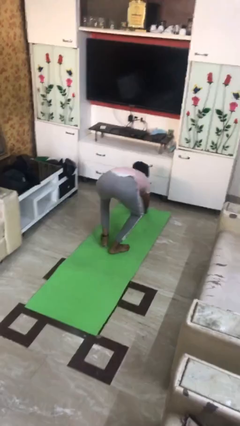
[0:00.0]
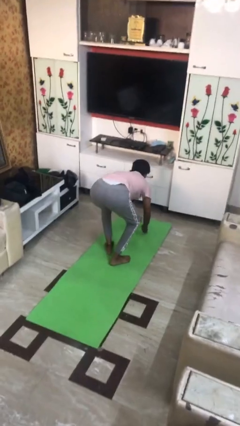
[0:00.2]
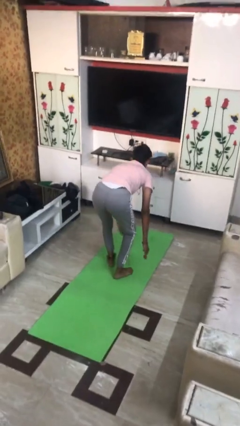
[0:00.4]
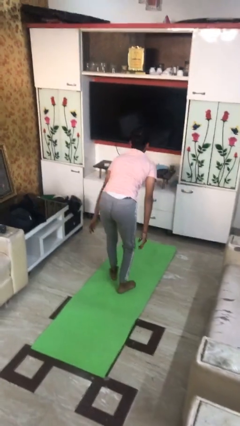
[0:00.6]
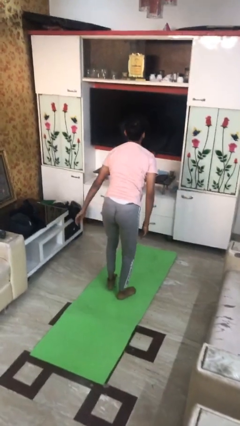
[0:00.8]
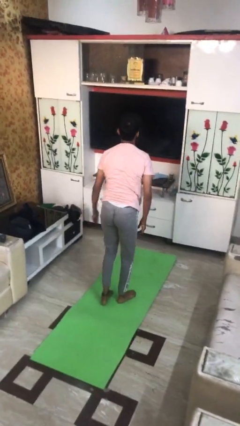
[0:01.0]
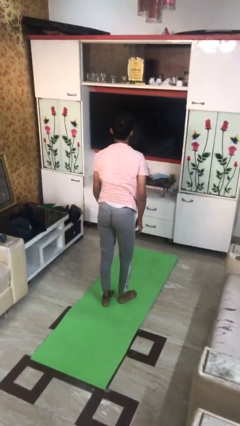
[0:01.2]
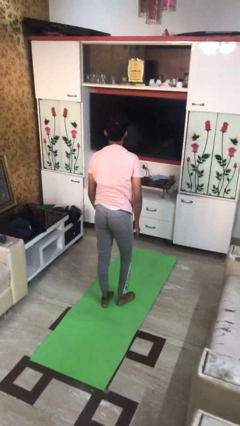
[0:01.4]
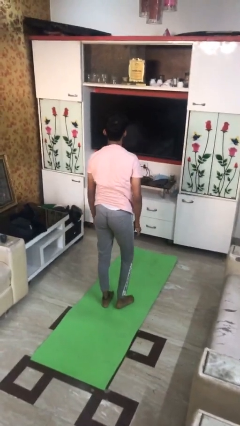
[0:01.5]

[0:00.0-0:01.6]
person stands up from floor

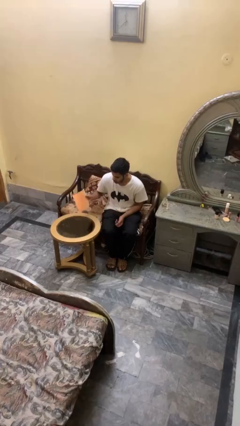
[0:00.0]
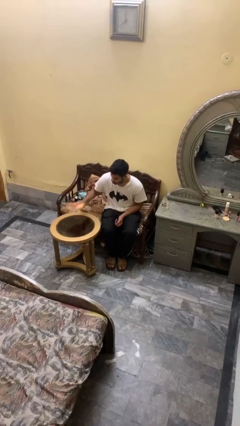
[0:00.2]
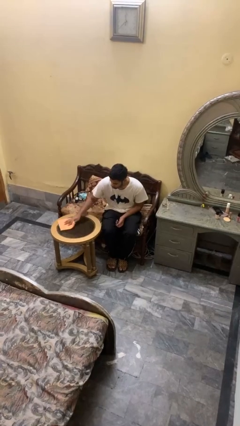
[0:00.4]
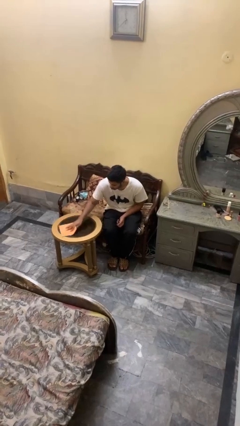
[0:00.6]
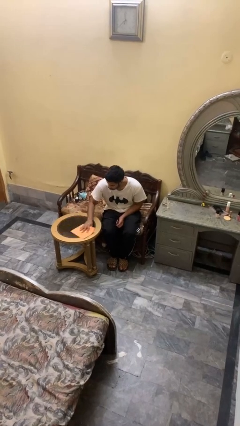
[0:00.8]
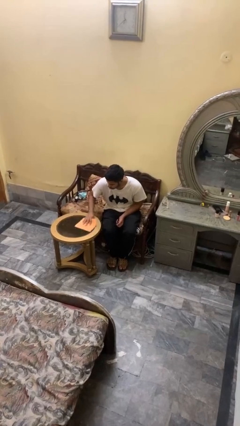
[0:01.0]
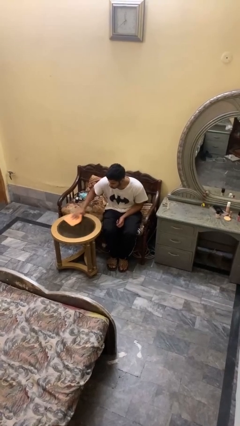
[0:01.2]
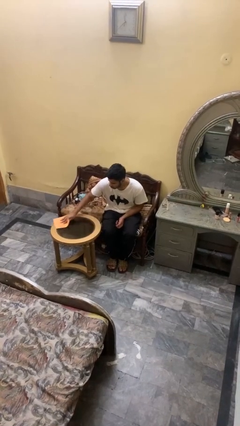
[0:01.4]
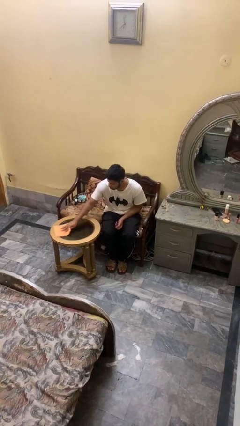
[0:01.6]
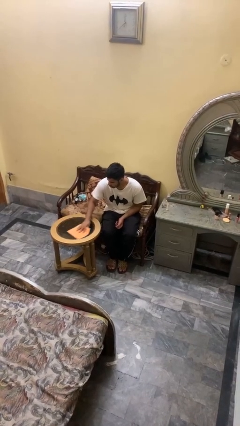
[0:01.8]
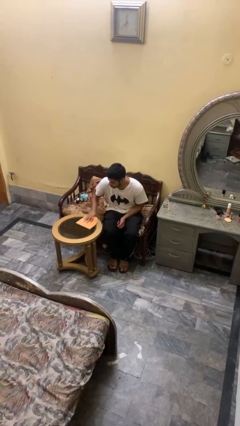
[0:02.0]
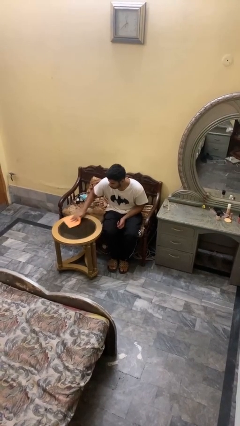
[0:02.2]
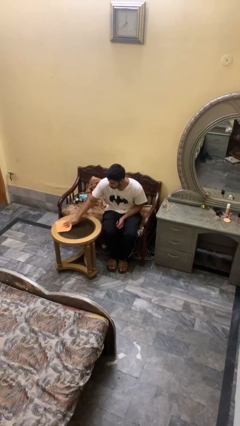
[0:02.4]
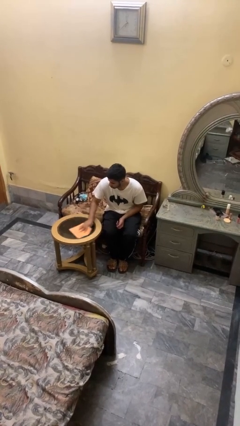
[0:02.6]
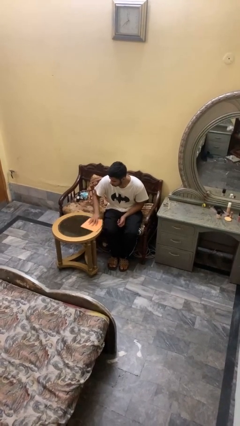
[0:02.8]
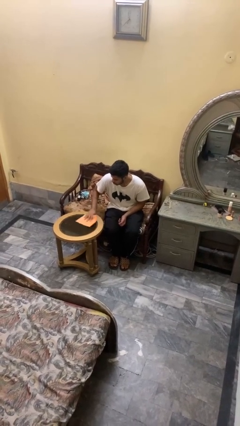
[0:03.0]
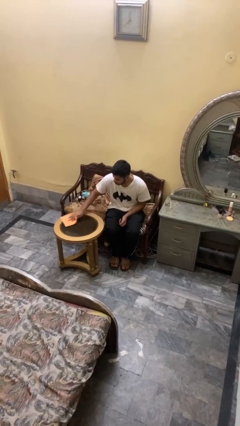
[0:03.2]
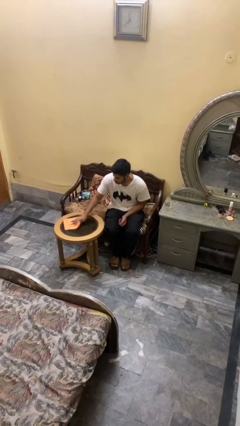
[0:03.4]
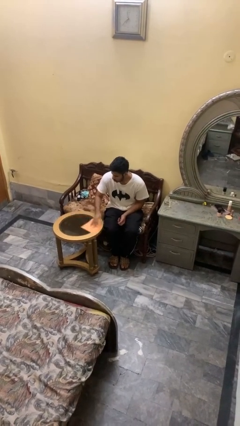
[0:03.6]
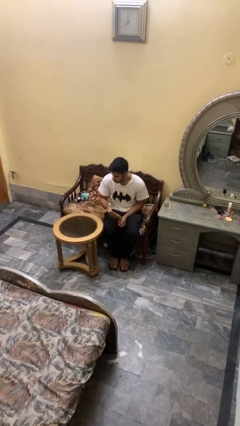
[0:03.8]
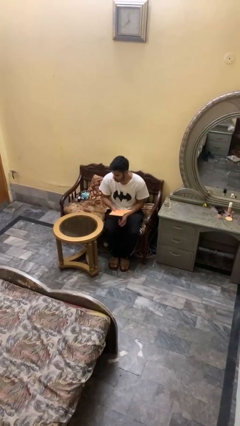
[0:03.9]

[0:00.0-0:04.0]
person cleans table with rag

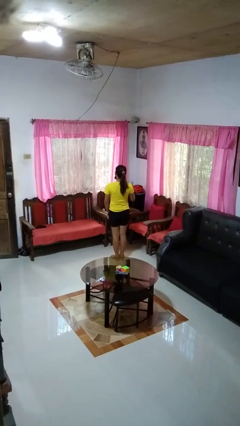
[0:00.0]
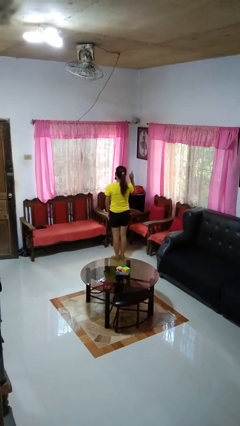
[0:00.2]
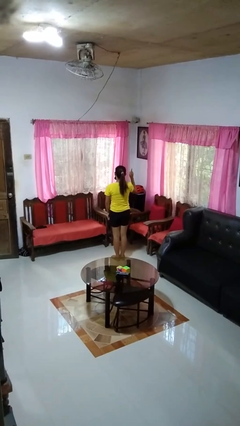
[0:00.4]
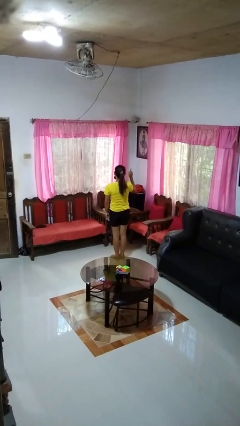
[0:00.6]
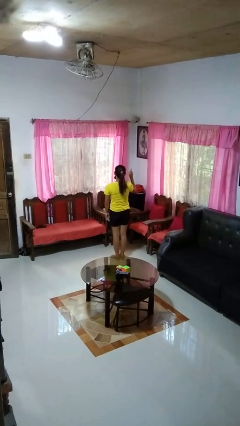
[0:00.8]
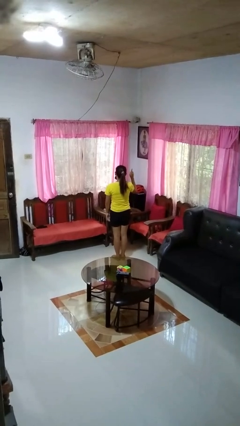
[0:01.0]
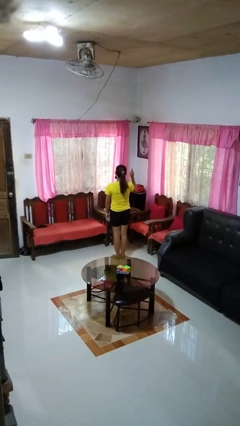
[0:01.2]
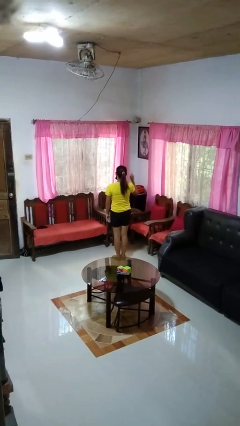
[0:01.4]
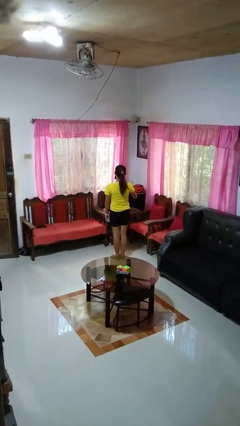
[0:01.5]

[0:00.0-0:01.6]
person gestures number one

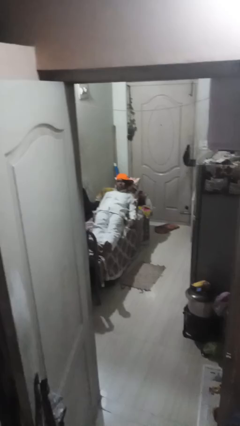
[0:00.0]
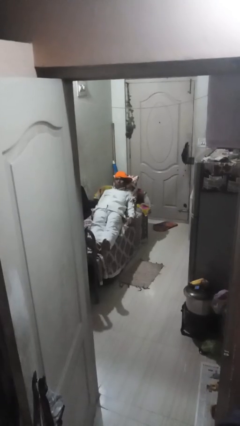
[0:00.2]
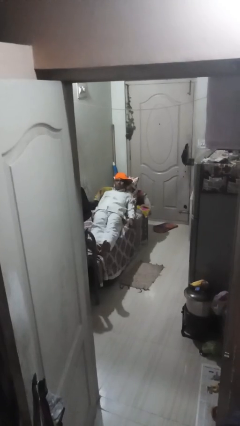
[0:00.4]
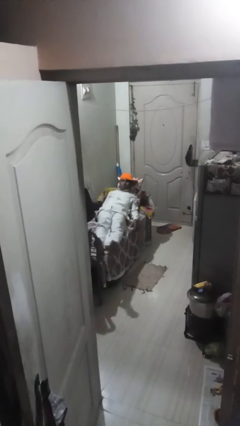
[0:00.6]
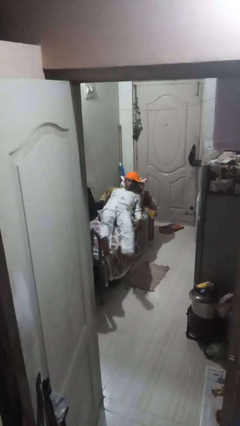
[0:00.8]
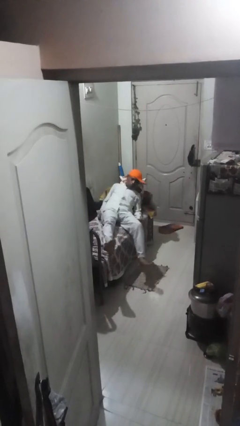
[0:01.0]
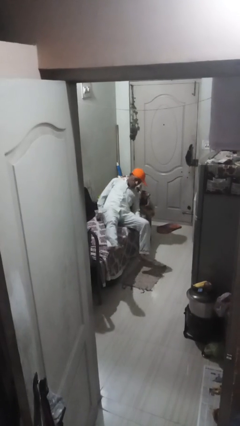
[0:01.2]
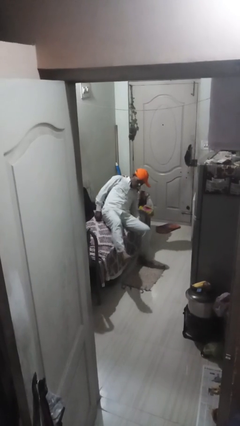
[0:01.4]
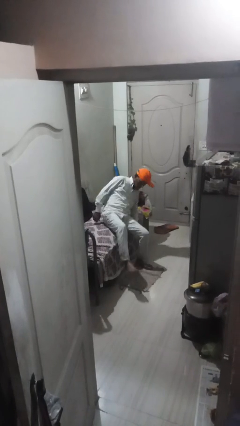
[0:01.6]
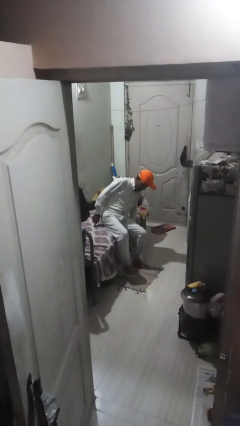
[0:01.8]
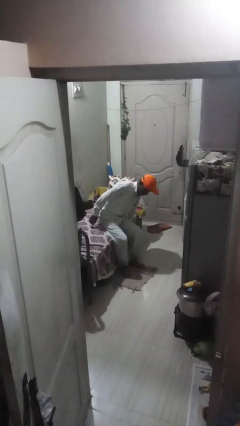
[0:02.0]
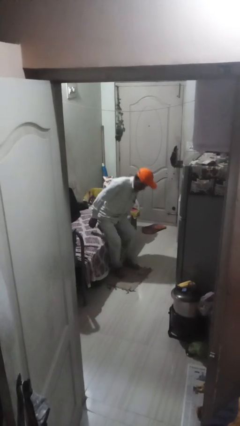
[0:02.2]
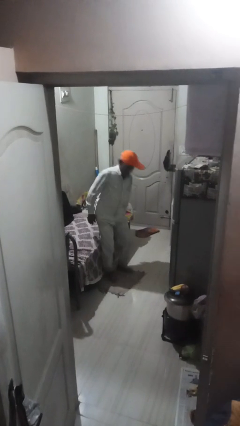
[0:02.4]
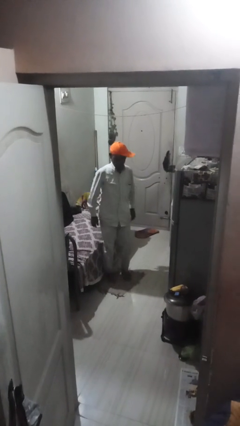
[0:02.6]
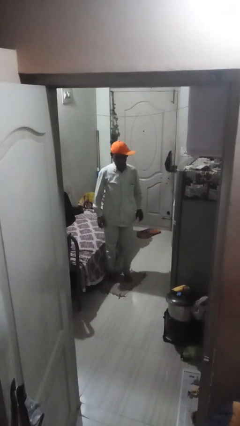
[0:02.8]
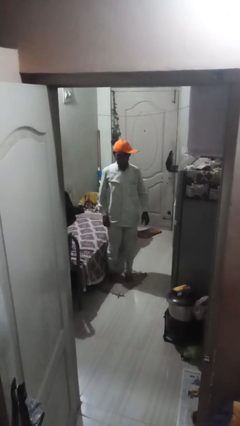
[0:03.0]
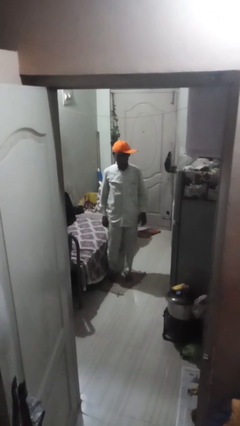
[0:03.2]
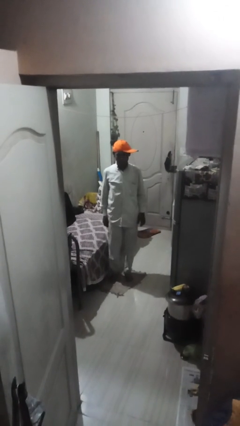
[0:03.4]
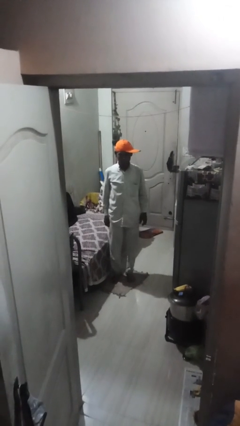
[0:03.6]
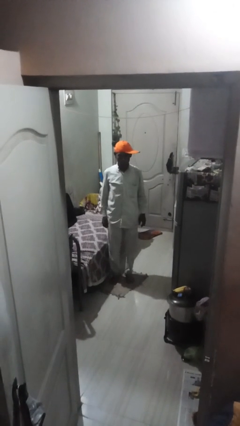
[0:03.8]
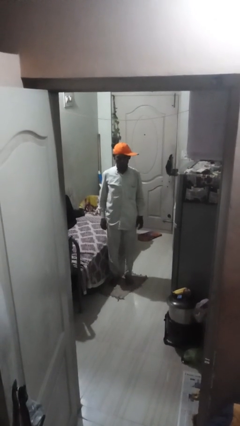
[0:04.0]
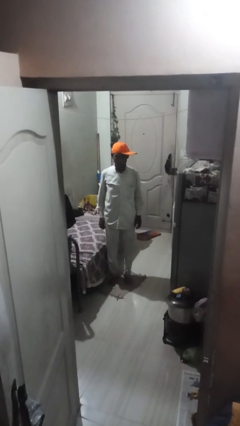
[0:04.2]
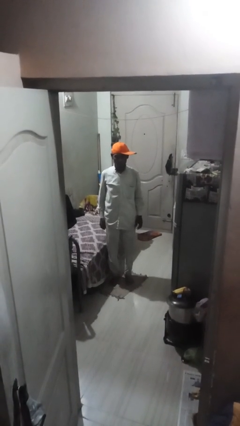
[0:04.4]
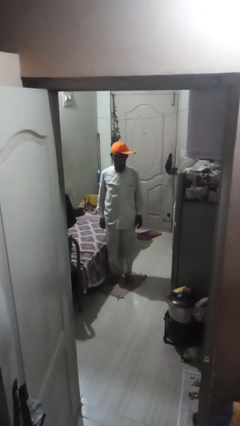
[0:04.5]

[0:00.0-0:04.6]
person stands up

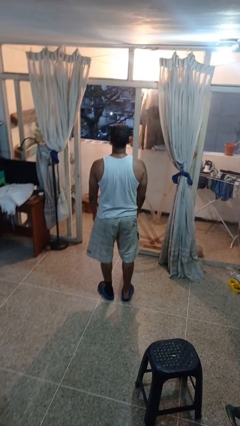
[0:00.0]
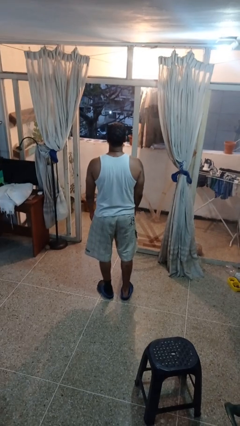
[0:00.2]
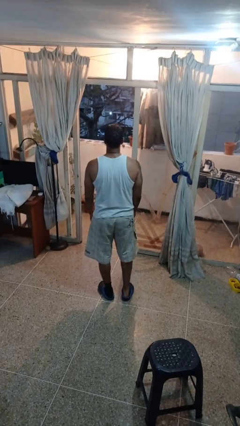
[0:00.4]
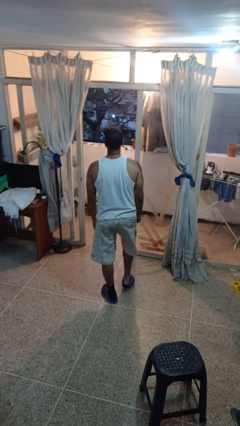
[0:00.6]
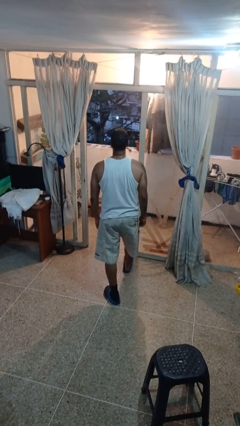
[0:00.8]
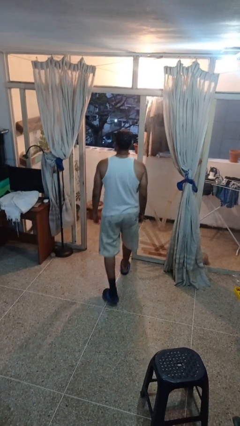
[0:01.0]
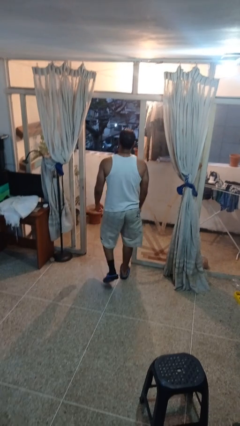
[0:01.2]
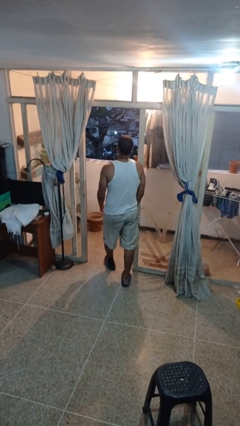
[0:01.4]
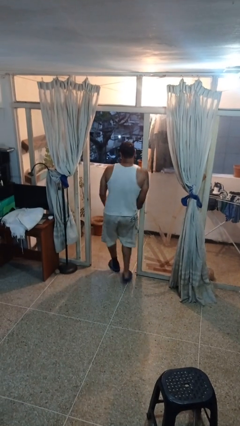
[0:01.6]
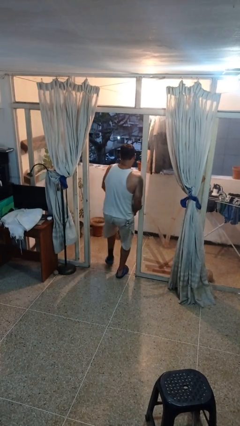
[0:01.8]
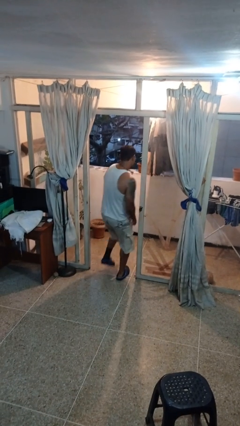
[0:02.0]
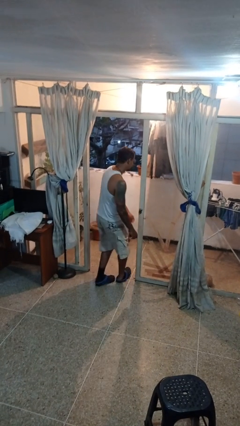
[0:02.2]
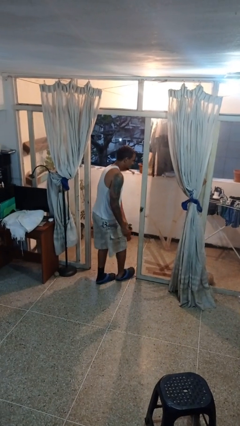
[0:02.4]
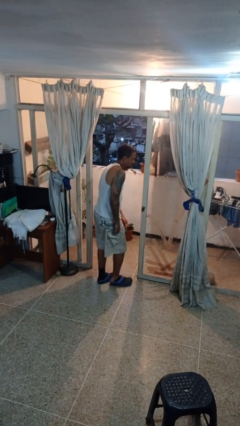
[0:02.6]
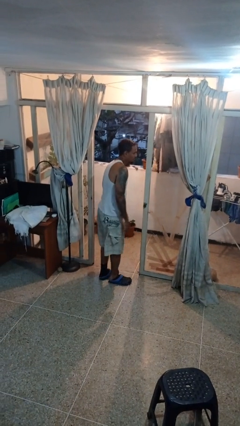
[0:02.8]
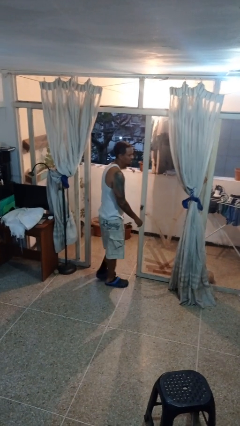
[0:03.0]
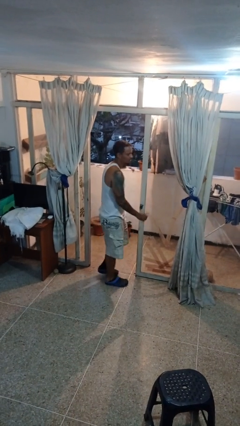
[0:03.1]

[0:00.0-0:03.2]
person bumps into wall

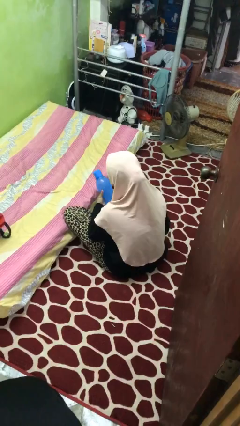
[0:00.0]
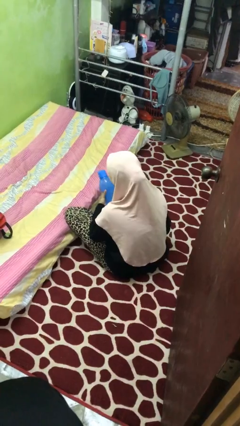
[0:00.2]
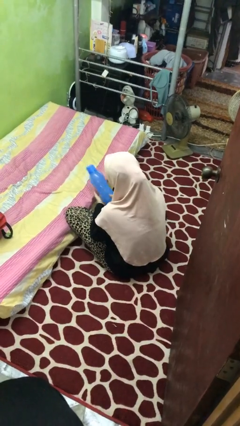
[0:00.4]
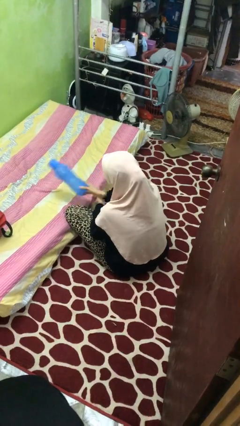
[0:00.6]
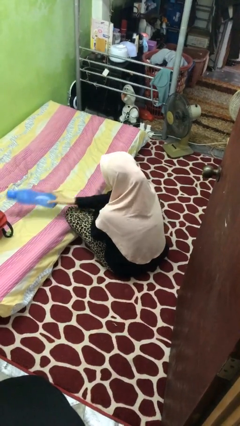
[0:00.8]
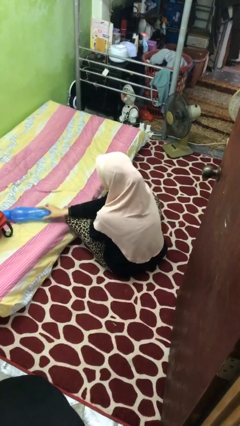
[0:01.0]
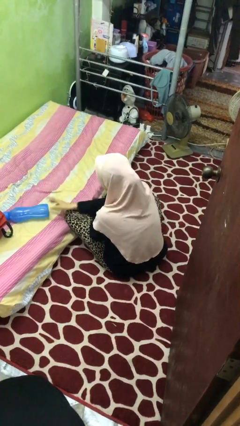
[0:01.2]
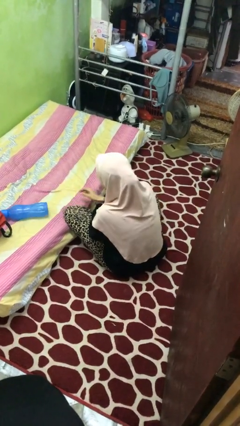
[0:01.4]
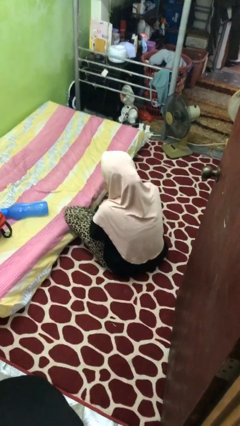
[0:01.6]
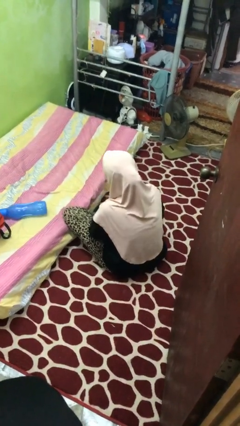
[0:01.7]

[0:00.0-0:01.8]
person puts down object on bed
